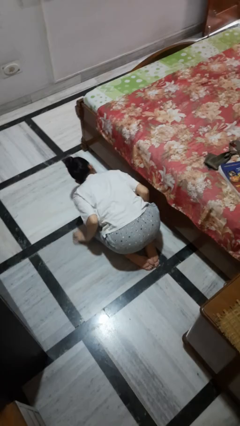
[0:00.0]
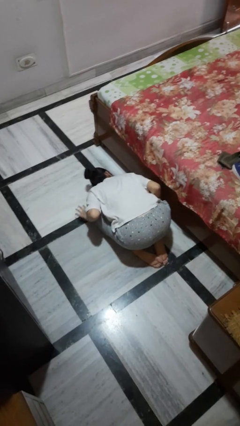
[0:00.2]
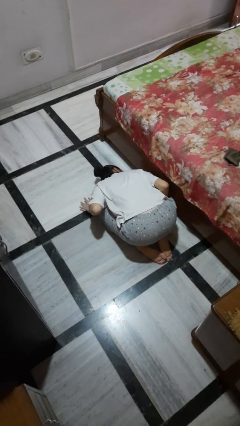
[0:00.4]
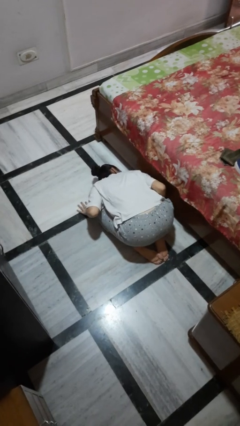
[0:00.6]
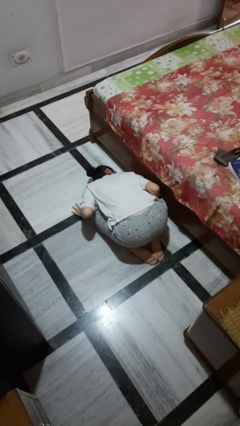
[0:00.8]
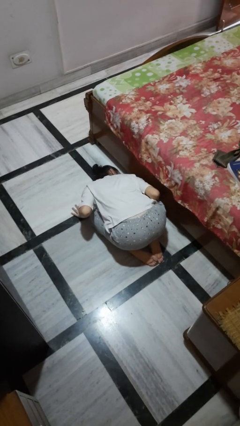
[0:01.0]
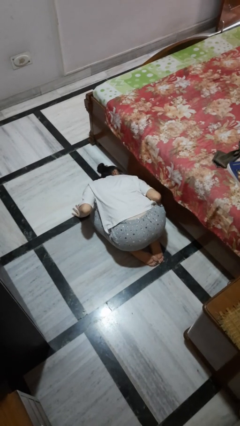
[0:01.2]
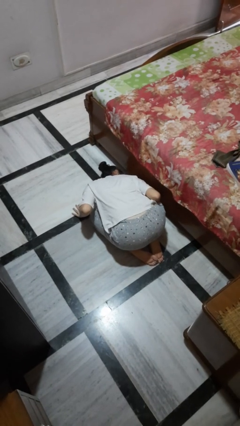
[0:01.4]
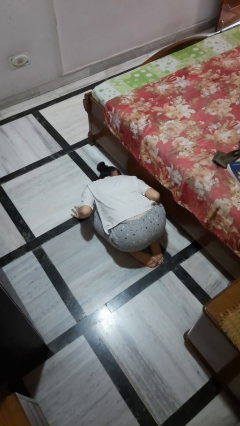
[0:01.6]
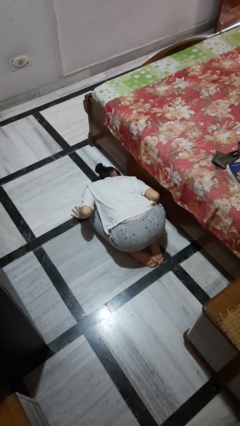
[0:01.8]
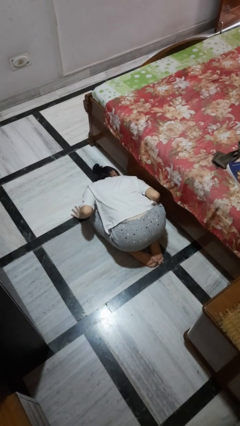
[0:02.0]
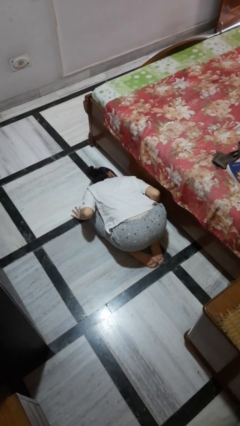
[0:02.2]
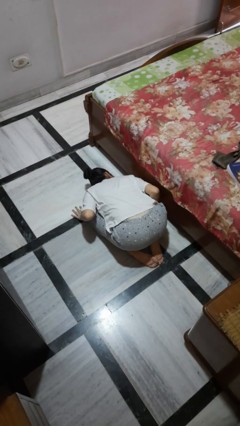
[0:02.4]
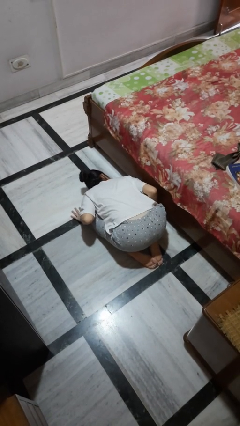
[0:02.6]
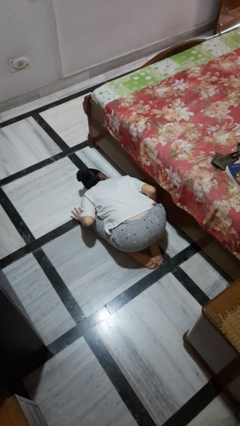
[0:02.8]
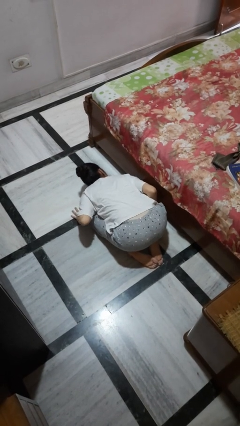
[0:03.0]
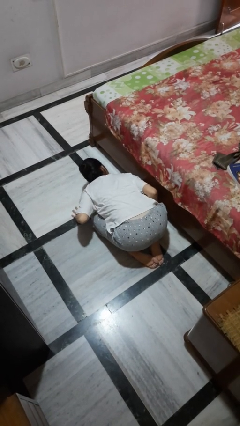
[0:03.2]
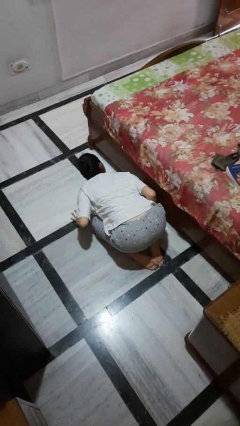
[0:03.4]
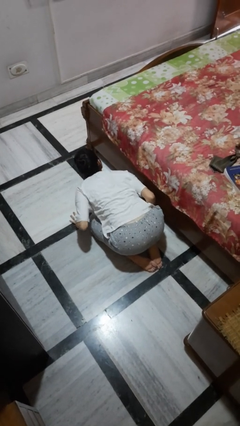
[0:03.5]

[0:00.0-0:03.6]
person searches under bed

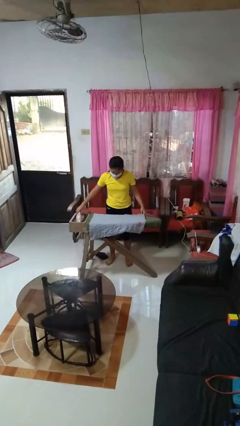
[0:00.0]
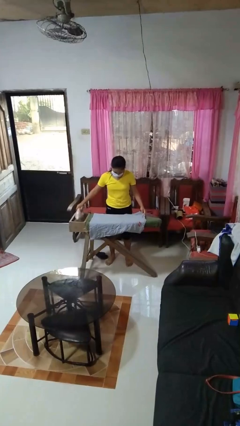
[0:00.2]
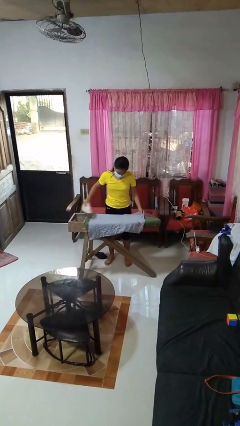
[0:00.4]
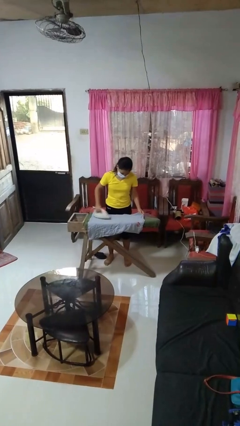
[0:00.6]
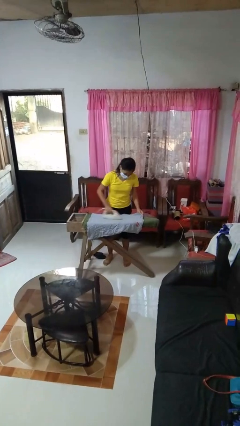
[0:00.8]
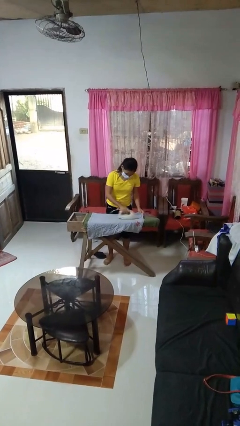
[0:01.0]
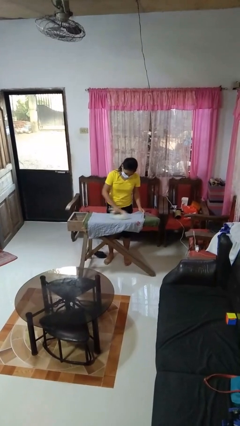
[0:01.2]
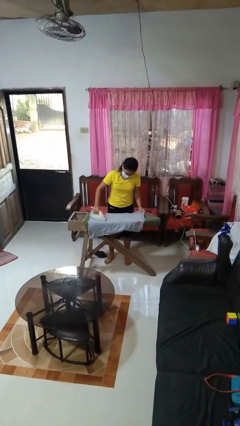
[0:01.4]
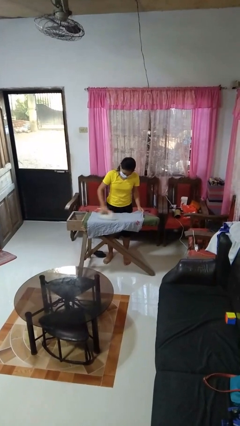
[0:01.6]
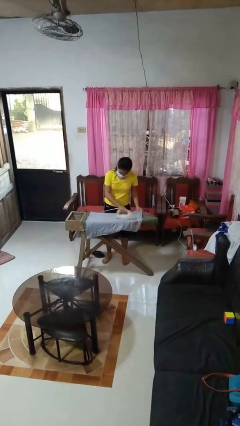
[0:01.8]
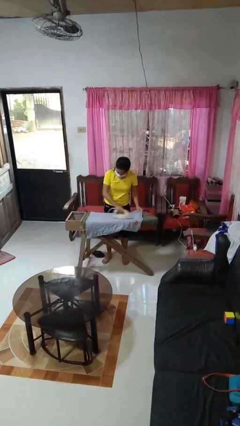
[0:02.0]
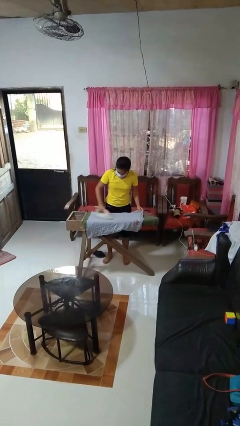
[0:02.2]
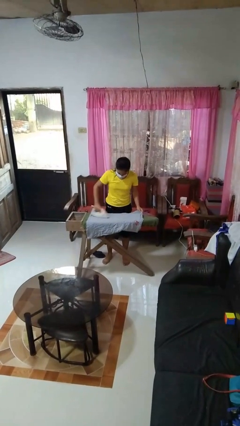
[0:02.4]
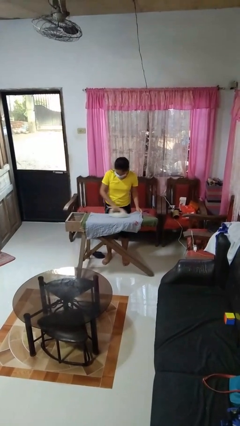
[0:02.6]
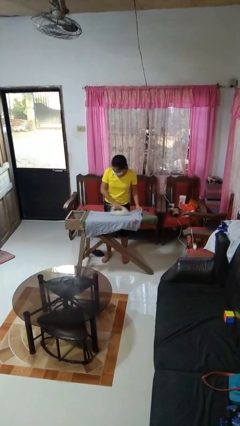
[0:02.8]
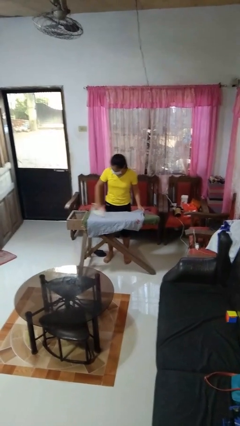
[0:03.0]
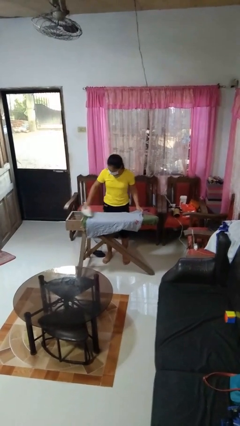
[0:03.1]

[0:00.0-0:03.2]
person irons clothes

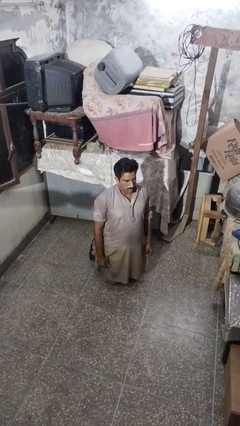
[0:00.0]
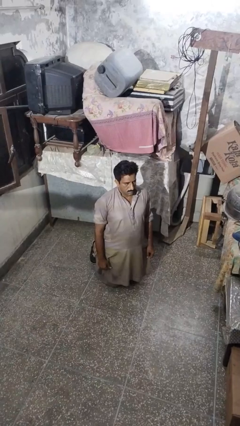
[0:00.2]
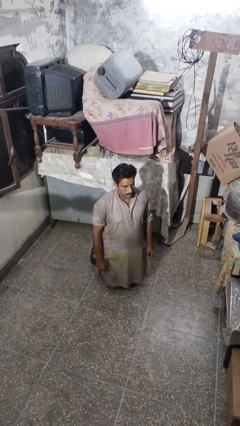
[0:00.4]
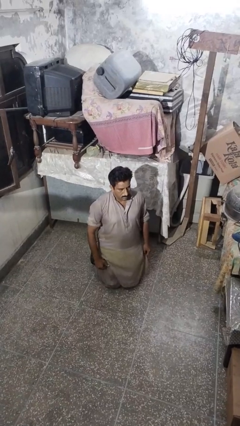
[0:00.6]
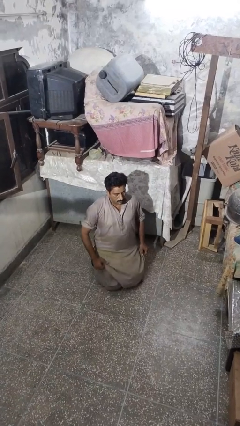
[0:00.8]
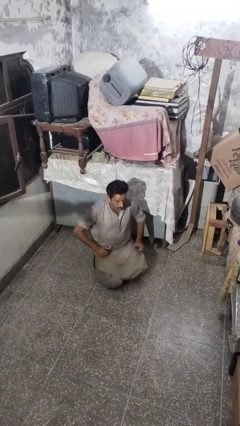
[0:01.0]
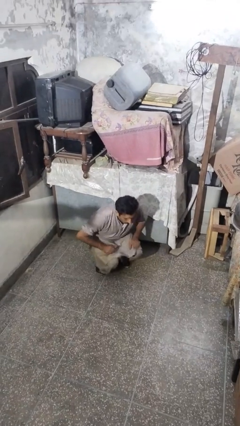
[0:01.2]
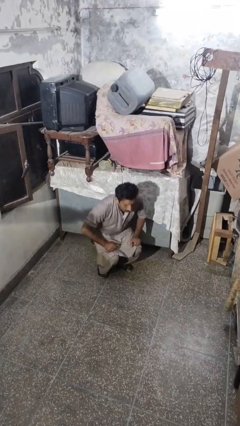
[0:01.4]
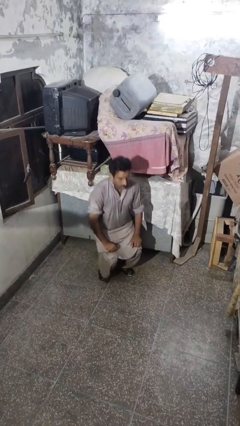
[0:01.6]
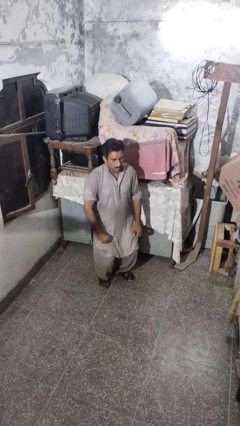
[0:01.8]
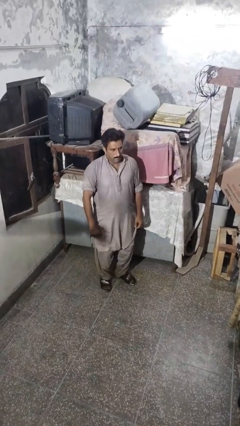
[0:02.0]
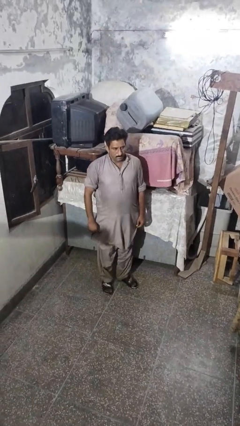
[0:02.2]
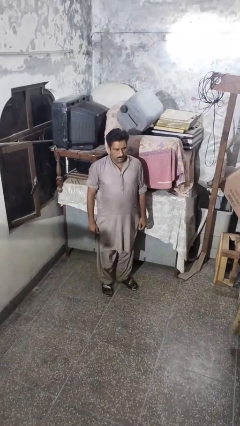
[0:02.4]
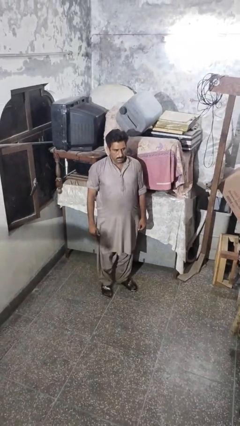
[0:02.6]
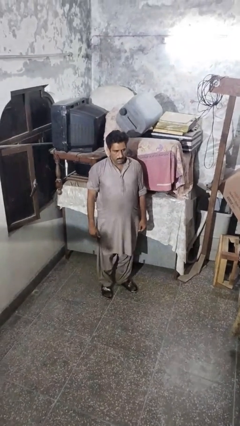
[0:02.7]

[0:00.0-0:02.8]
person stands up from floor

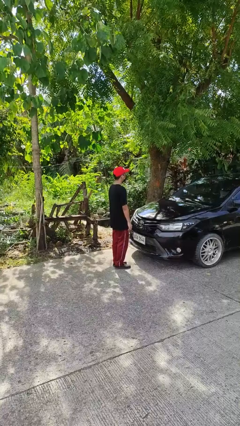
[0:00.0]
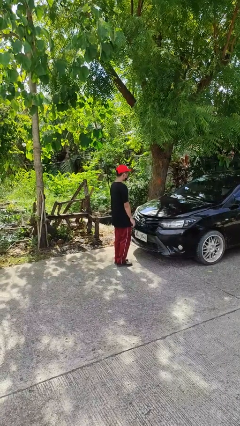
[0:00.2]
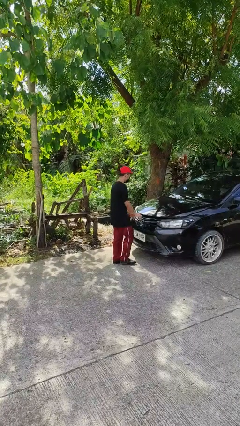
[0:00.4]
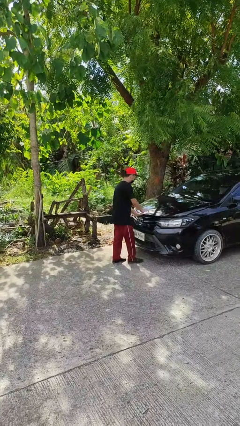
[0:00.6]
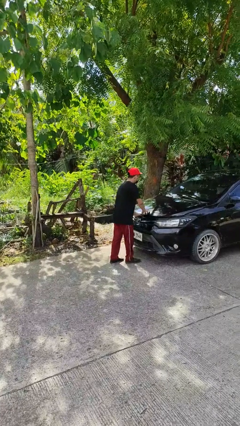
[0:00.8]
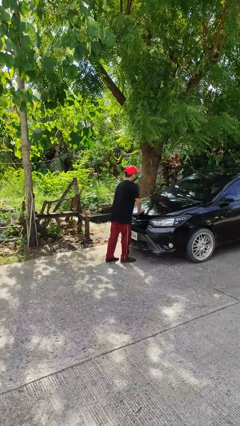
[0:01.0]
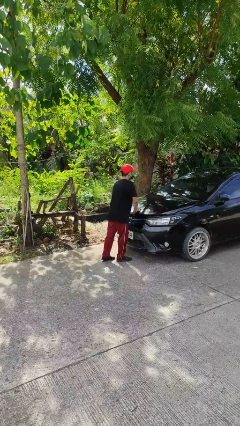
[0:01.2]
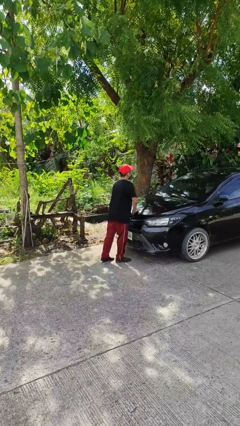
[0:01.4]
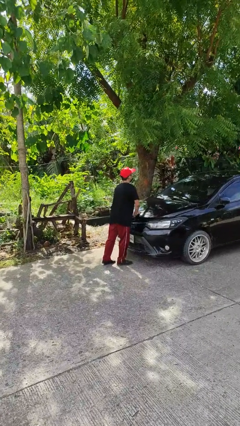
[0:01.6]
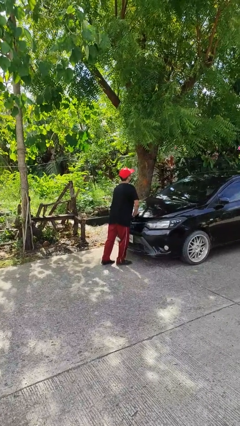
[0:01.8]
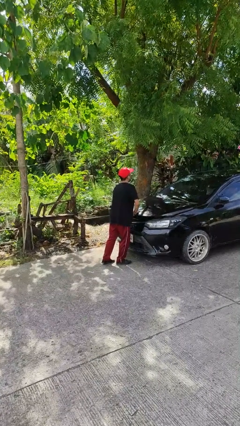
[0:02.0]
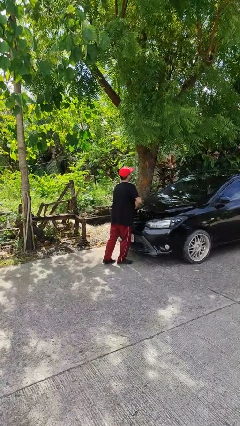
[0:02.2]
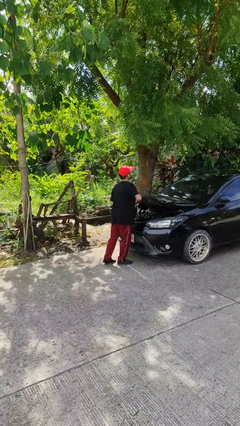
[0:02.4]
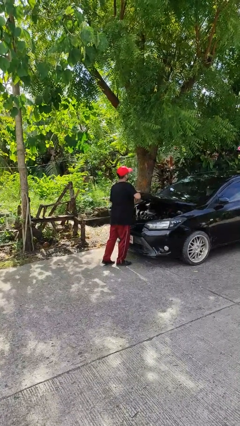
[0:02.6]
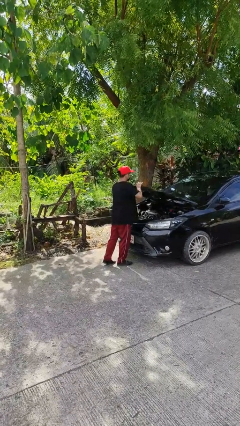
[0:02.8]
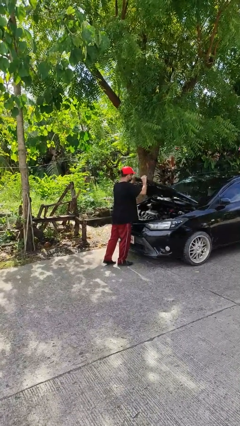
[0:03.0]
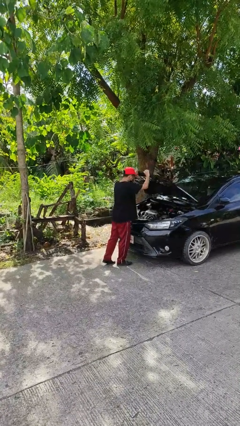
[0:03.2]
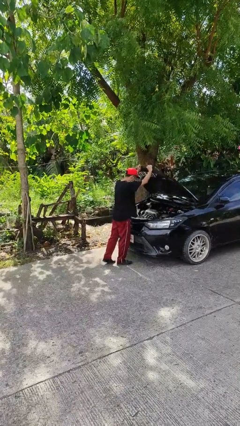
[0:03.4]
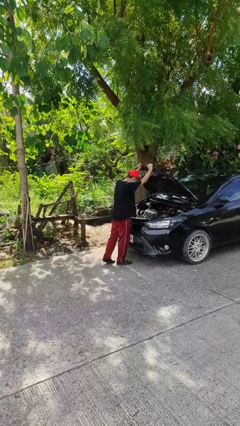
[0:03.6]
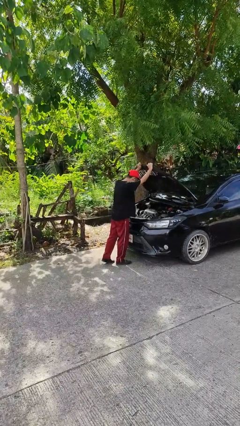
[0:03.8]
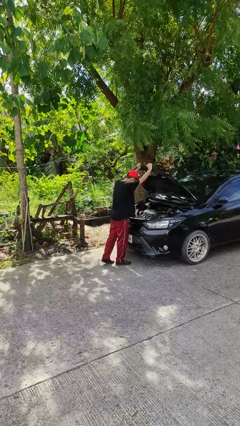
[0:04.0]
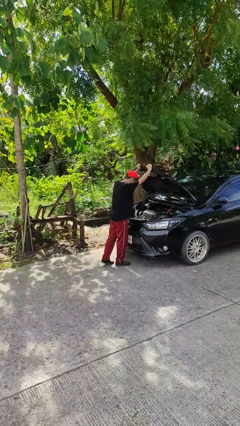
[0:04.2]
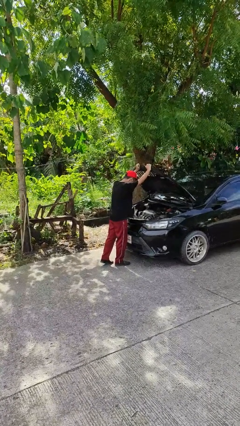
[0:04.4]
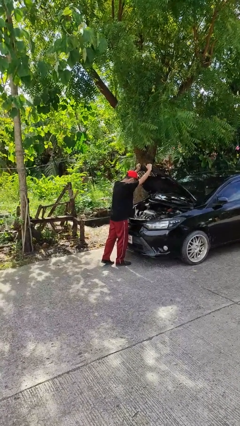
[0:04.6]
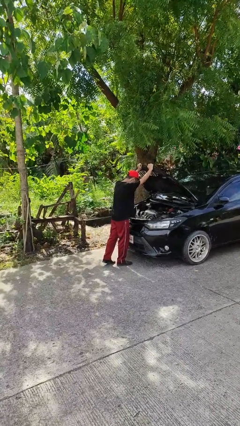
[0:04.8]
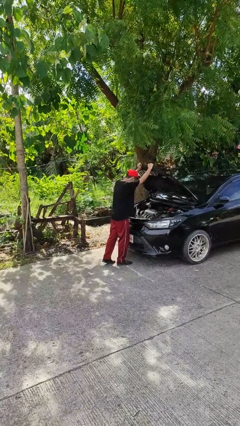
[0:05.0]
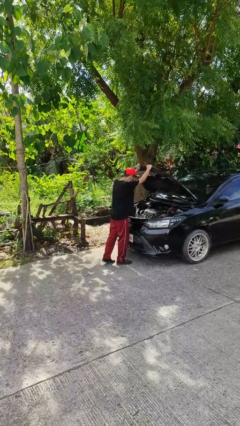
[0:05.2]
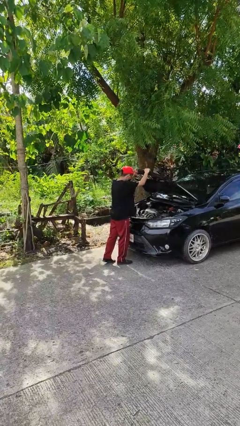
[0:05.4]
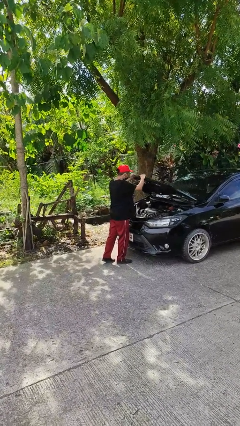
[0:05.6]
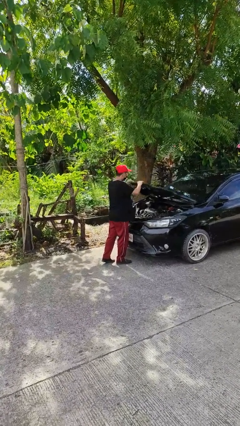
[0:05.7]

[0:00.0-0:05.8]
person opens car hood

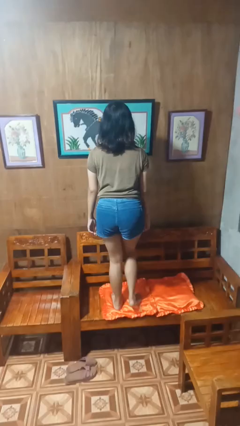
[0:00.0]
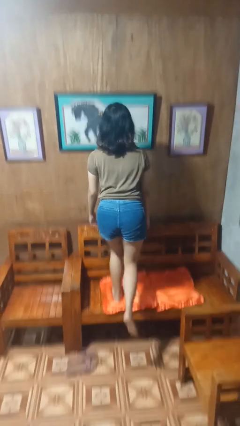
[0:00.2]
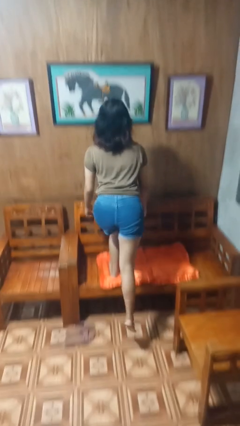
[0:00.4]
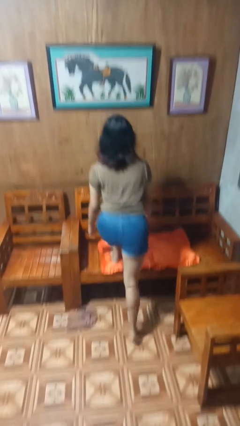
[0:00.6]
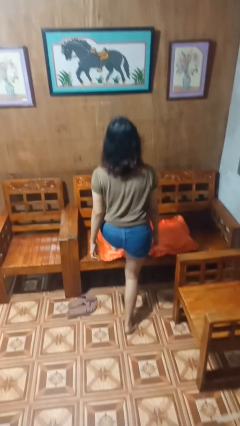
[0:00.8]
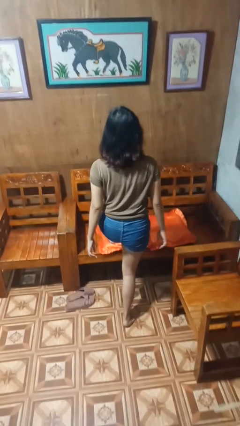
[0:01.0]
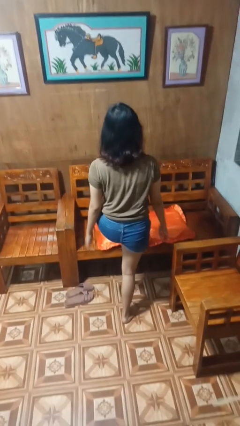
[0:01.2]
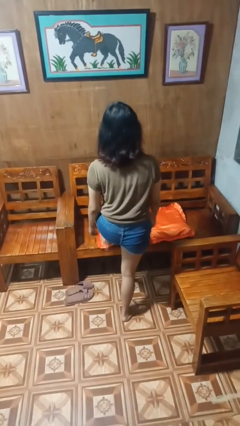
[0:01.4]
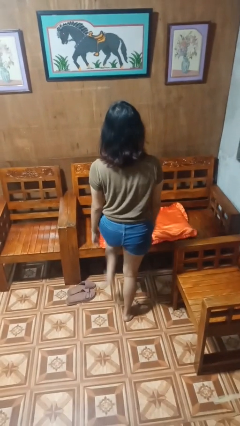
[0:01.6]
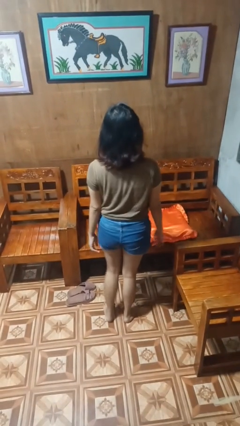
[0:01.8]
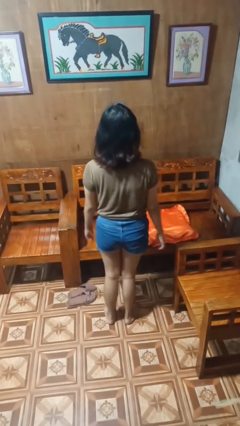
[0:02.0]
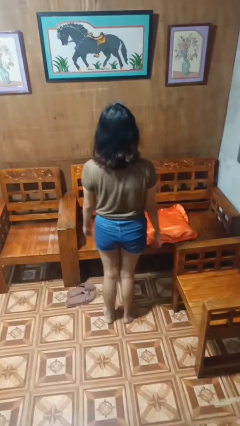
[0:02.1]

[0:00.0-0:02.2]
person climbs off couch
